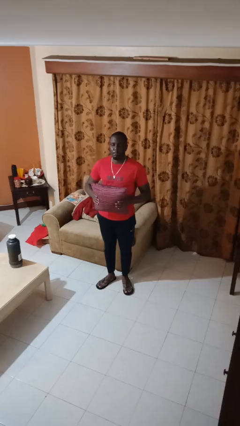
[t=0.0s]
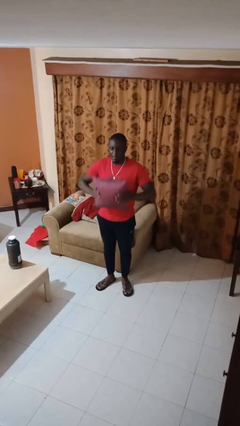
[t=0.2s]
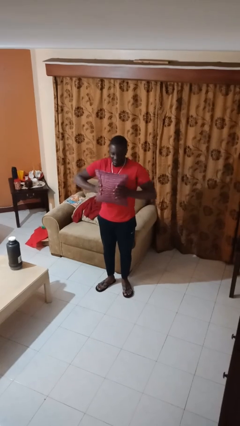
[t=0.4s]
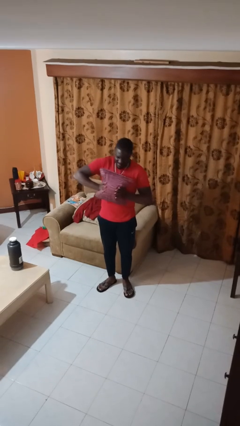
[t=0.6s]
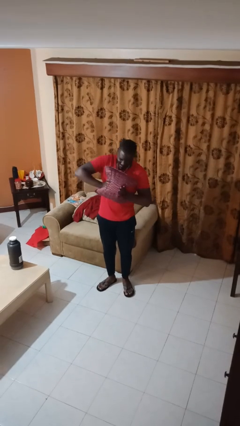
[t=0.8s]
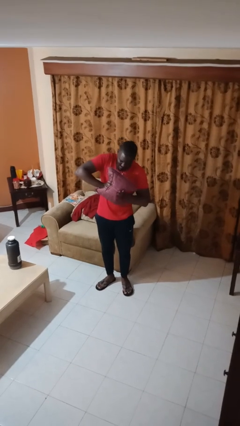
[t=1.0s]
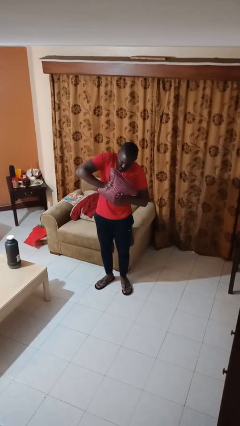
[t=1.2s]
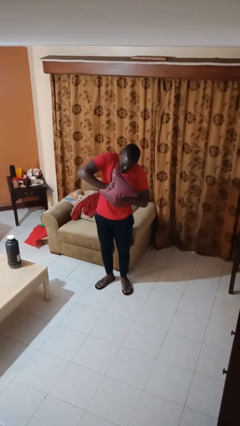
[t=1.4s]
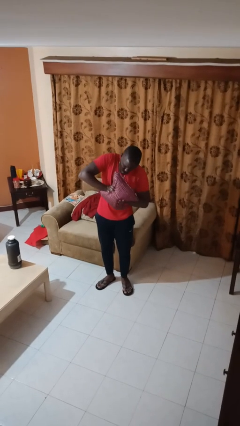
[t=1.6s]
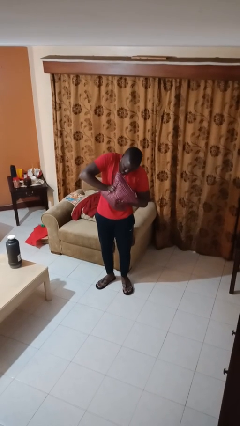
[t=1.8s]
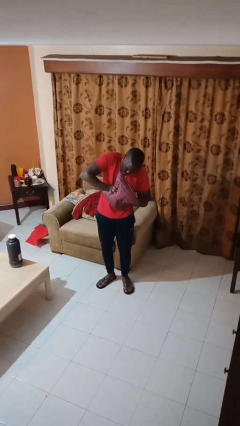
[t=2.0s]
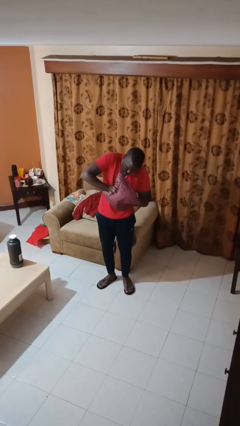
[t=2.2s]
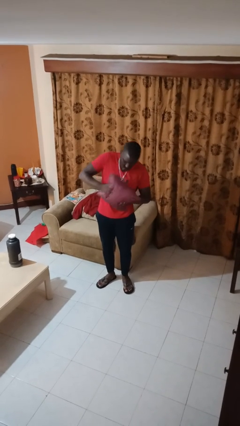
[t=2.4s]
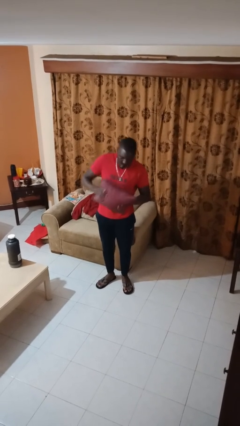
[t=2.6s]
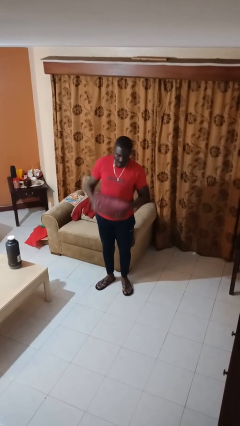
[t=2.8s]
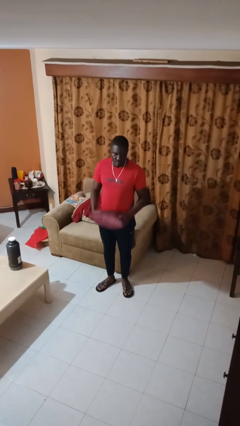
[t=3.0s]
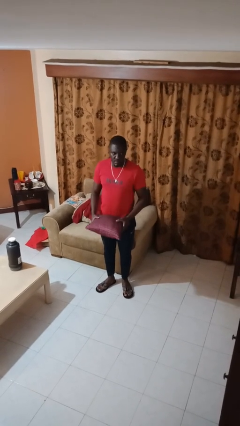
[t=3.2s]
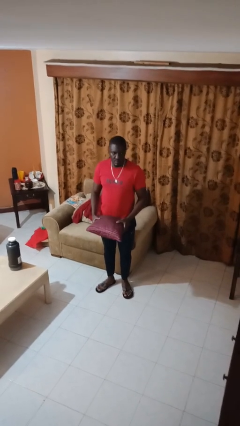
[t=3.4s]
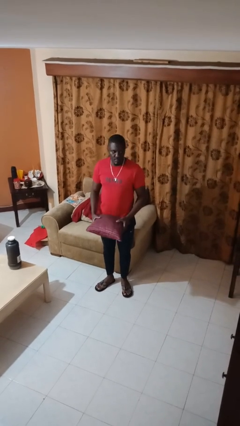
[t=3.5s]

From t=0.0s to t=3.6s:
person squeezes object

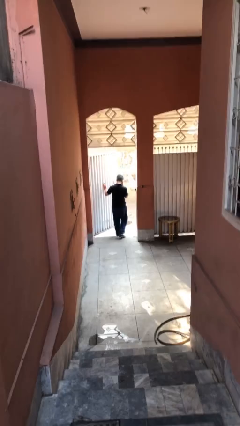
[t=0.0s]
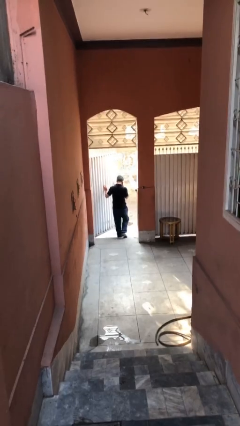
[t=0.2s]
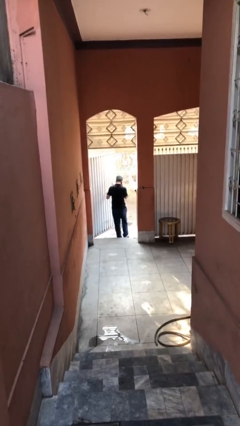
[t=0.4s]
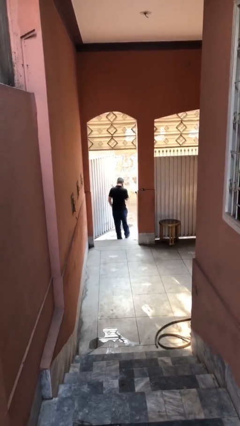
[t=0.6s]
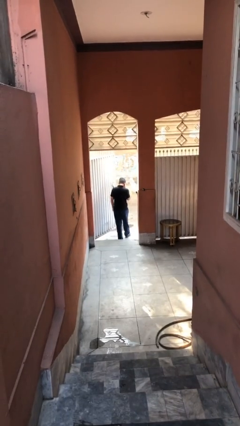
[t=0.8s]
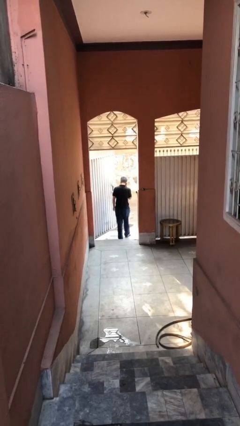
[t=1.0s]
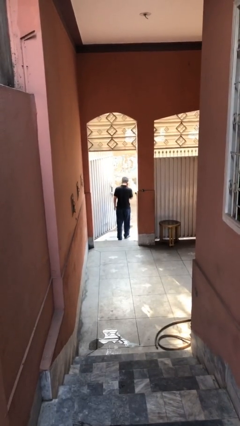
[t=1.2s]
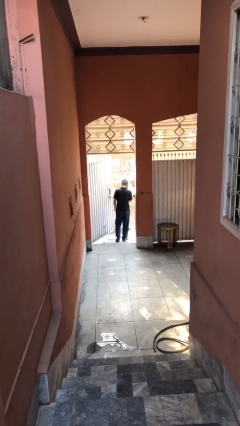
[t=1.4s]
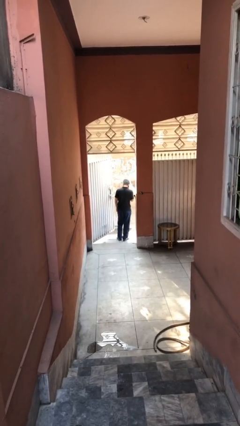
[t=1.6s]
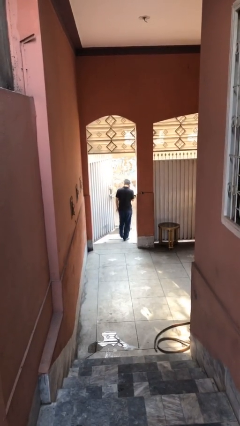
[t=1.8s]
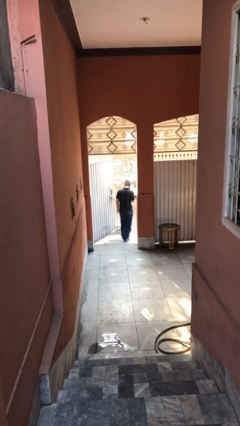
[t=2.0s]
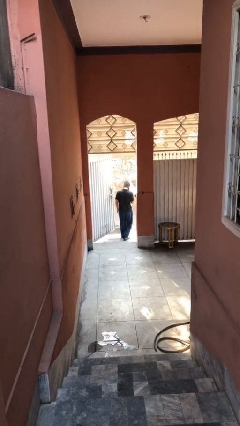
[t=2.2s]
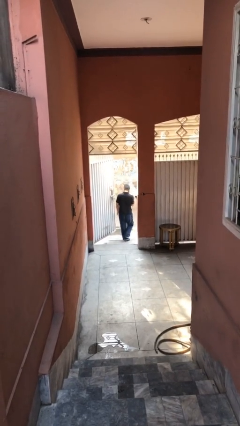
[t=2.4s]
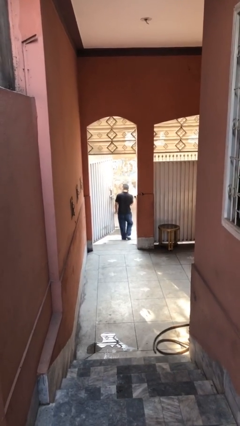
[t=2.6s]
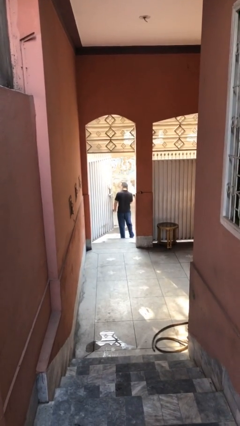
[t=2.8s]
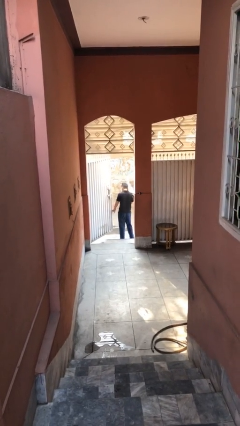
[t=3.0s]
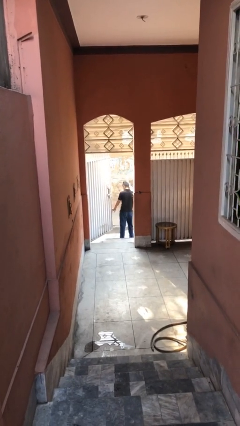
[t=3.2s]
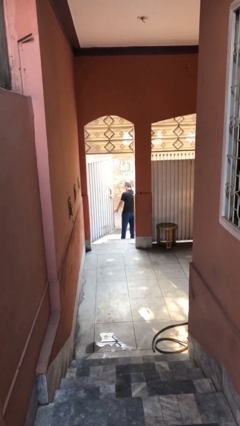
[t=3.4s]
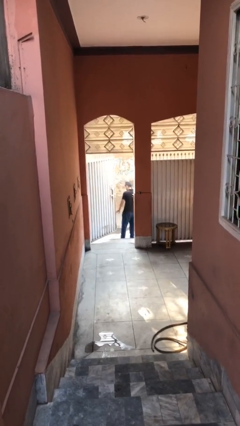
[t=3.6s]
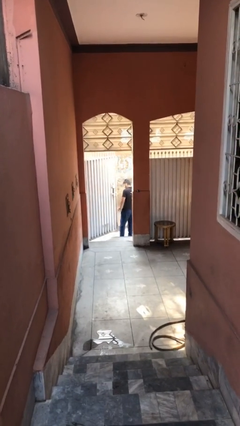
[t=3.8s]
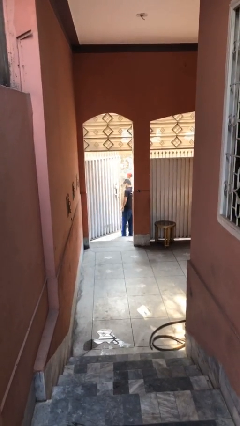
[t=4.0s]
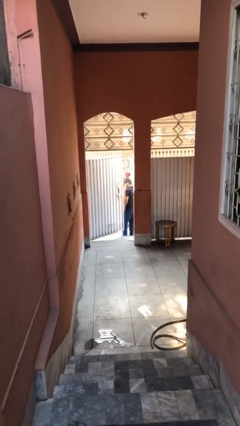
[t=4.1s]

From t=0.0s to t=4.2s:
person exits scene through structure

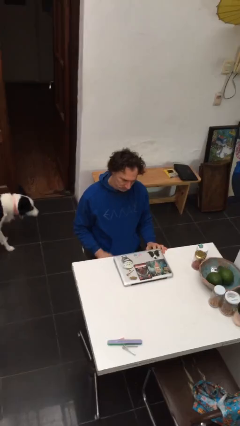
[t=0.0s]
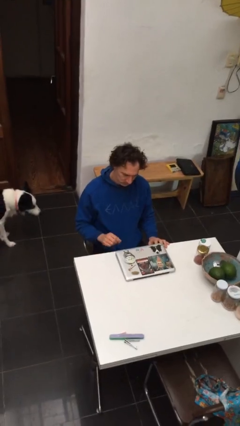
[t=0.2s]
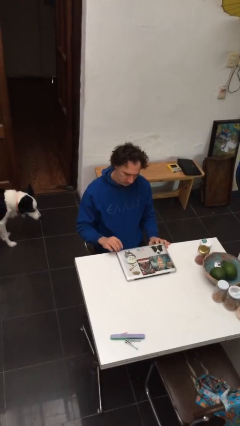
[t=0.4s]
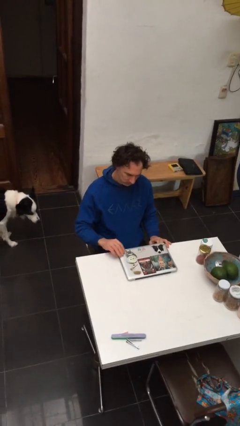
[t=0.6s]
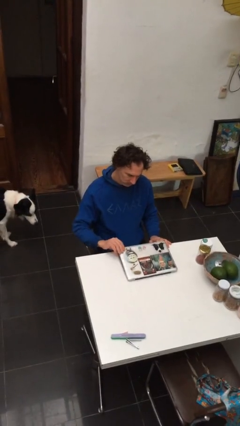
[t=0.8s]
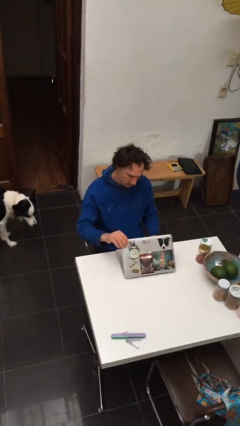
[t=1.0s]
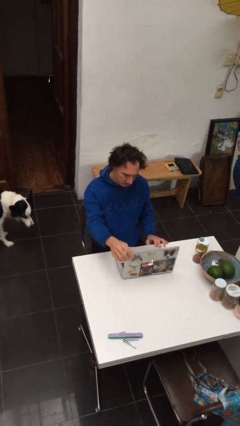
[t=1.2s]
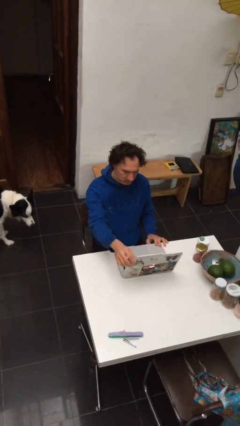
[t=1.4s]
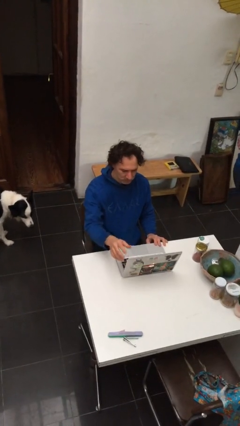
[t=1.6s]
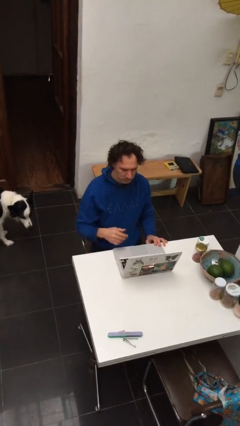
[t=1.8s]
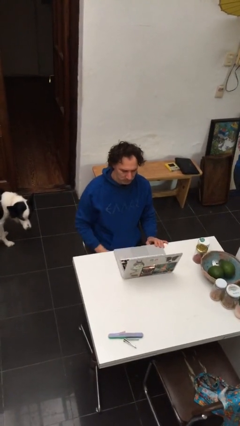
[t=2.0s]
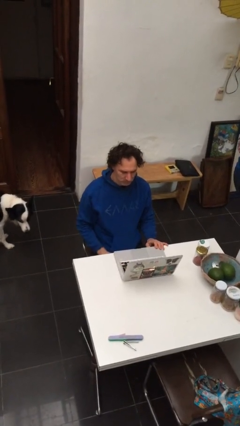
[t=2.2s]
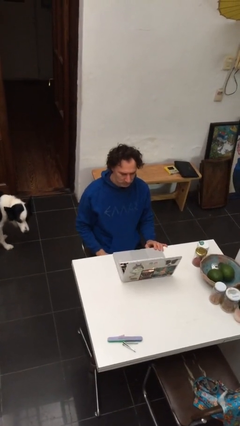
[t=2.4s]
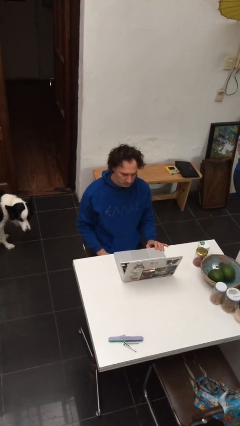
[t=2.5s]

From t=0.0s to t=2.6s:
person opens laptop

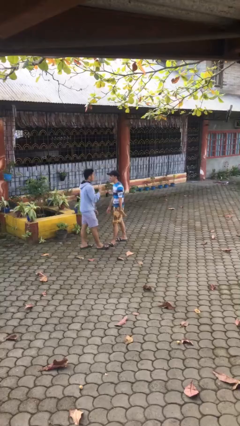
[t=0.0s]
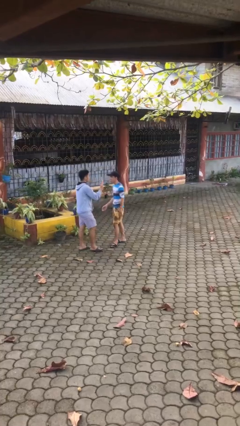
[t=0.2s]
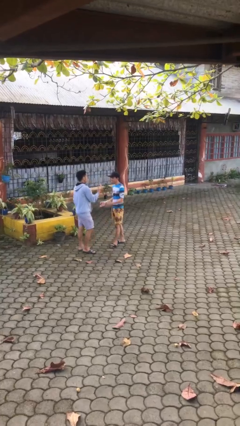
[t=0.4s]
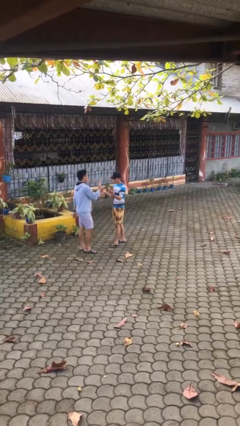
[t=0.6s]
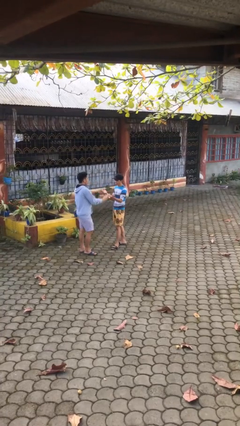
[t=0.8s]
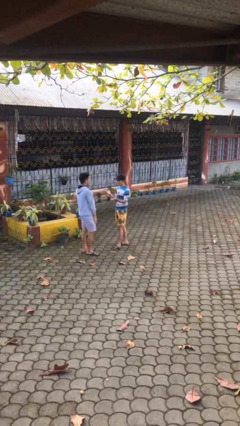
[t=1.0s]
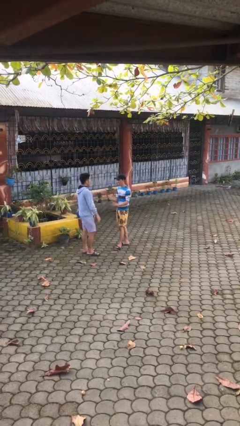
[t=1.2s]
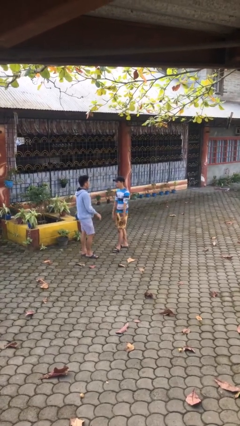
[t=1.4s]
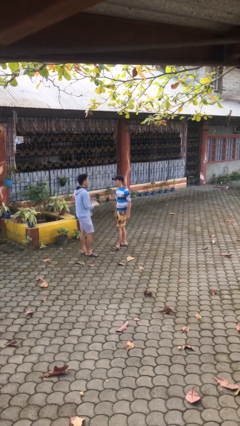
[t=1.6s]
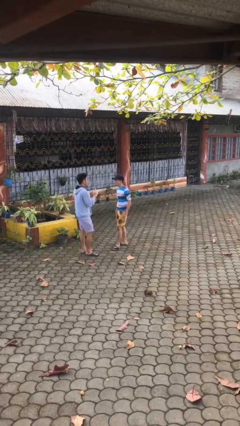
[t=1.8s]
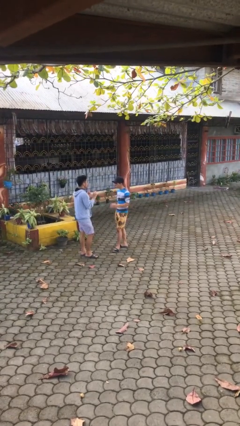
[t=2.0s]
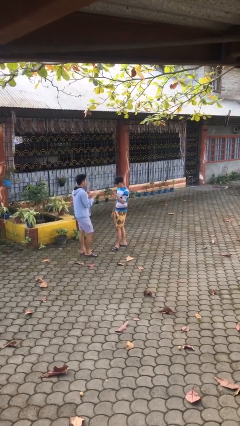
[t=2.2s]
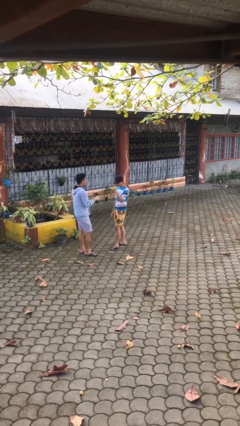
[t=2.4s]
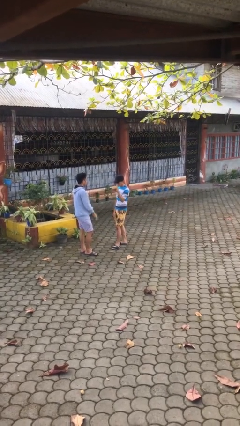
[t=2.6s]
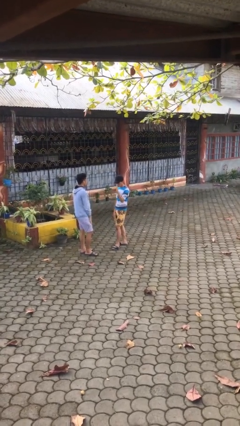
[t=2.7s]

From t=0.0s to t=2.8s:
person talks to person

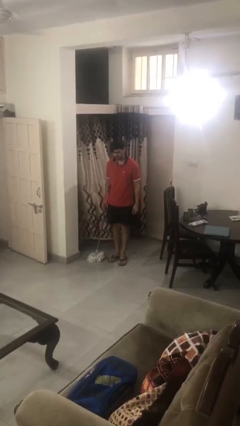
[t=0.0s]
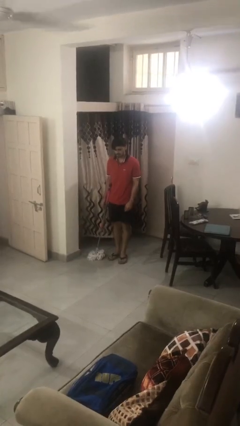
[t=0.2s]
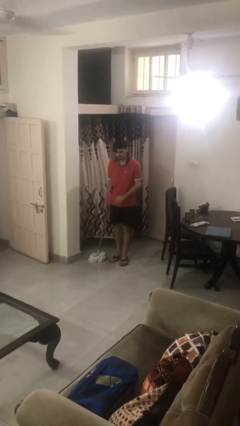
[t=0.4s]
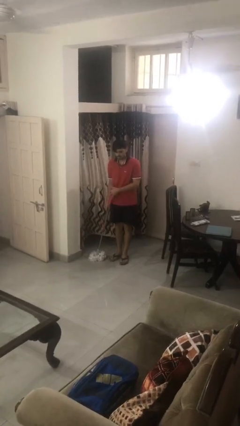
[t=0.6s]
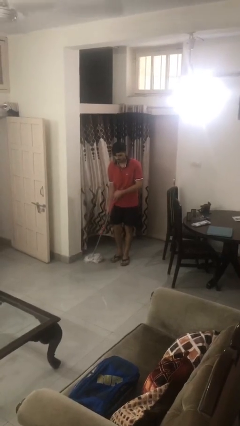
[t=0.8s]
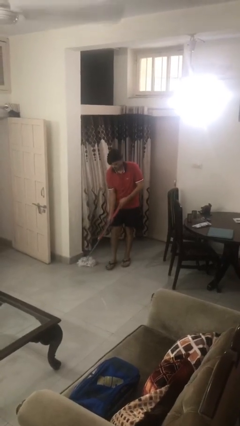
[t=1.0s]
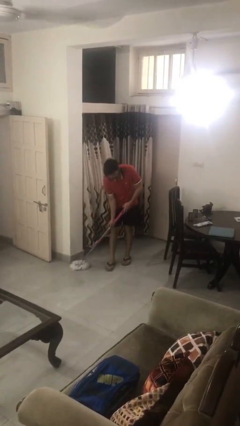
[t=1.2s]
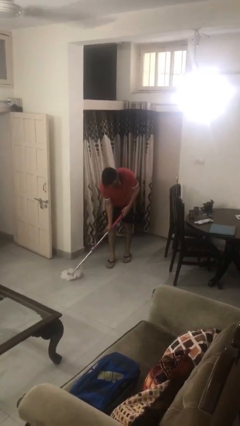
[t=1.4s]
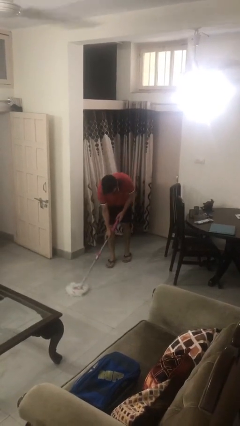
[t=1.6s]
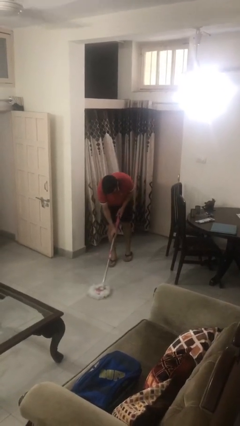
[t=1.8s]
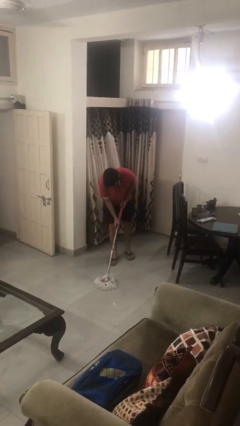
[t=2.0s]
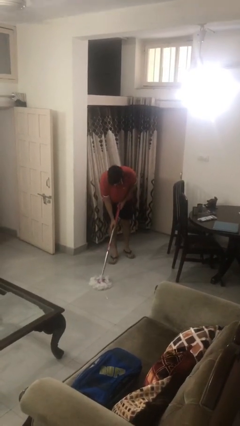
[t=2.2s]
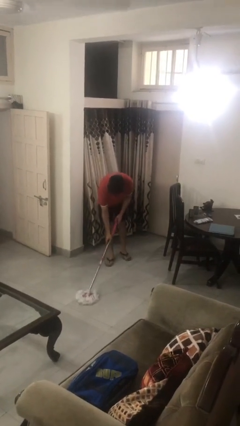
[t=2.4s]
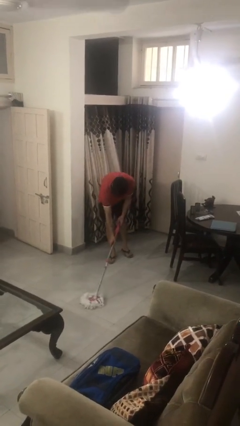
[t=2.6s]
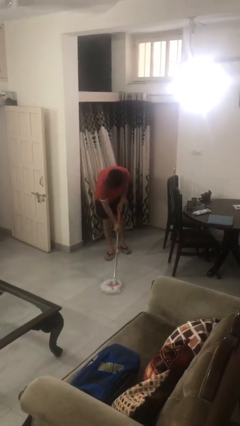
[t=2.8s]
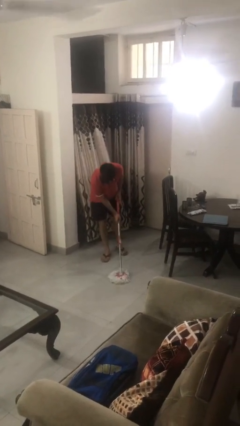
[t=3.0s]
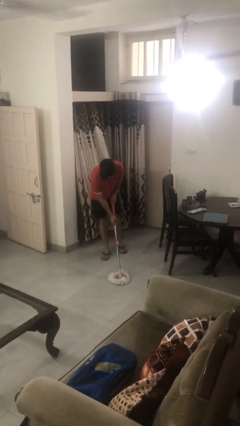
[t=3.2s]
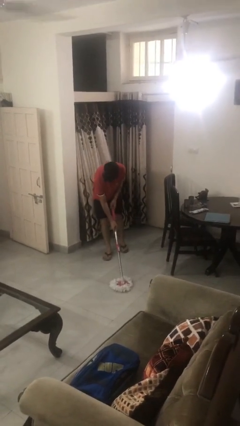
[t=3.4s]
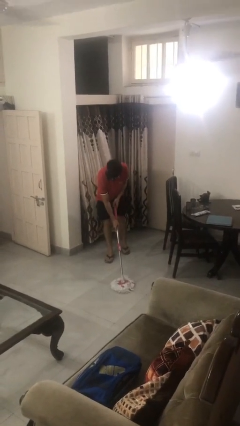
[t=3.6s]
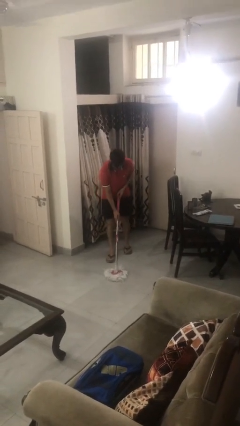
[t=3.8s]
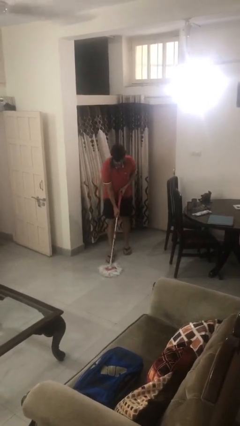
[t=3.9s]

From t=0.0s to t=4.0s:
person mops
